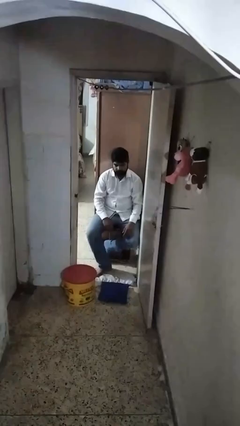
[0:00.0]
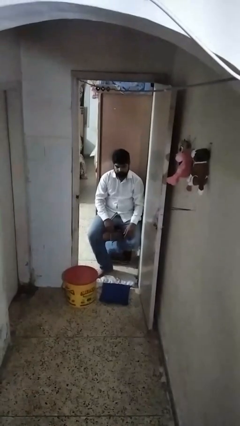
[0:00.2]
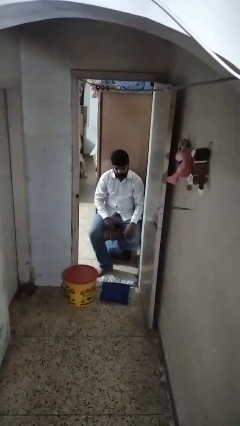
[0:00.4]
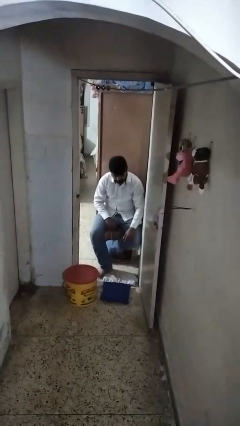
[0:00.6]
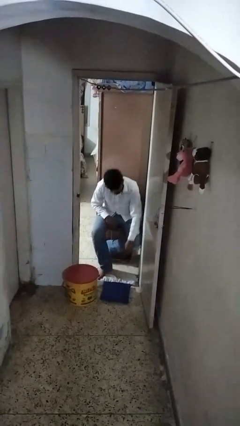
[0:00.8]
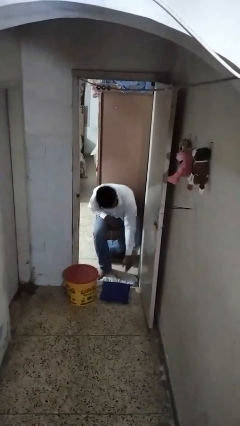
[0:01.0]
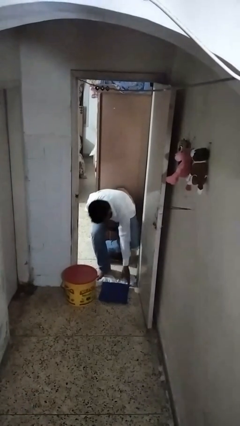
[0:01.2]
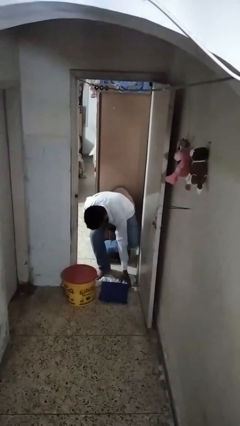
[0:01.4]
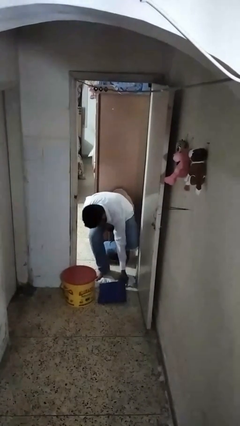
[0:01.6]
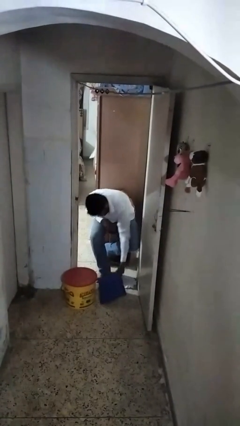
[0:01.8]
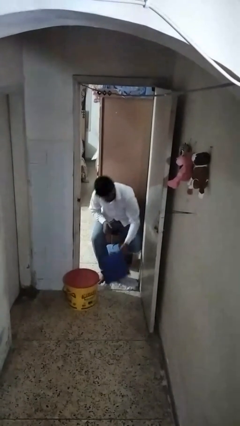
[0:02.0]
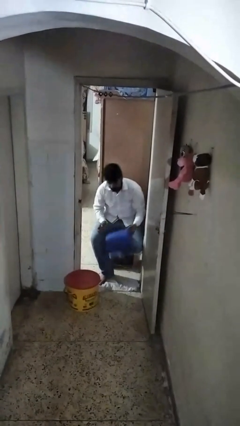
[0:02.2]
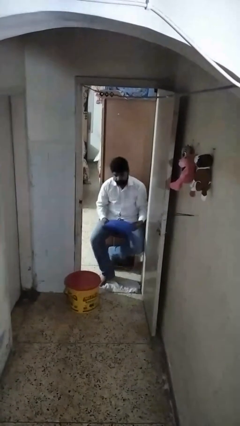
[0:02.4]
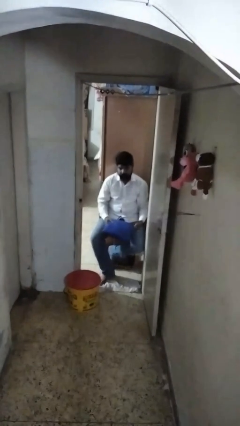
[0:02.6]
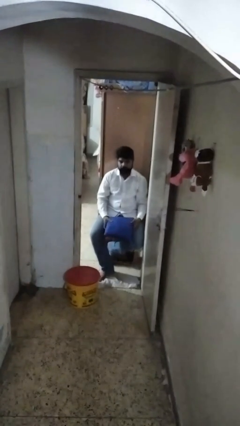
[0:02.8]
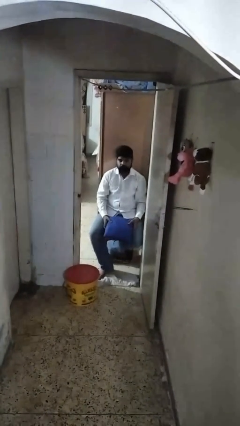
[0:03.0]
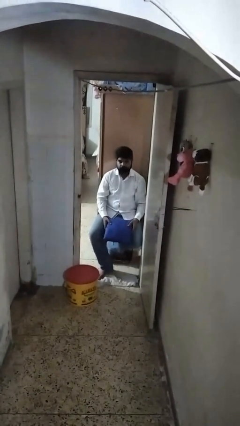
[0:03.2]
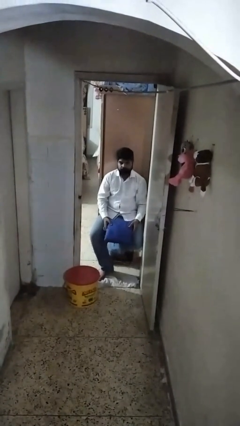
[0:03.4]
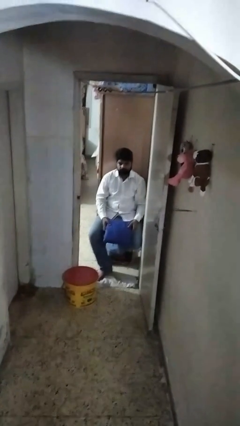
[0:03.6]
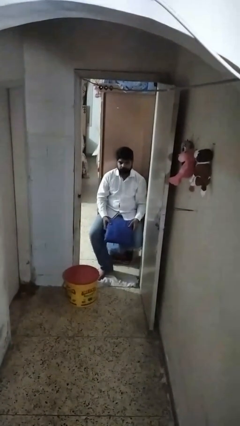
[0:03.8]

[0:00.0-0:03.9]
person picks up object from floor

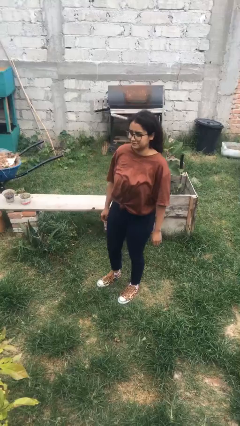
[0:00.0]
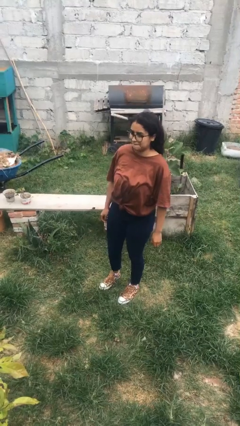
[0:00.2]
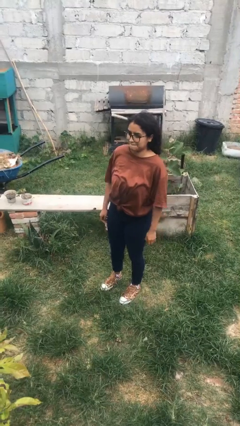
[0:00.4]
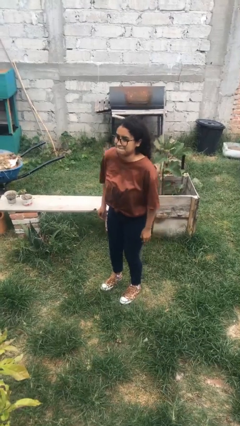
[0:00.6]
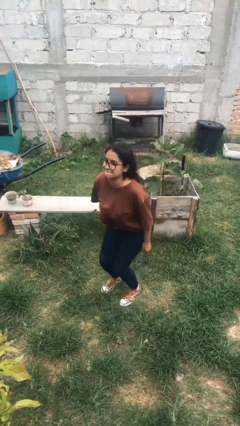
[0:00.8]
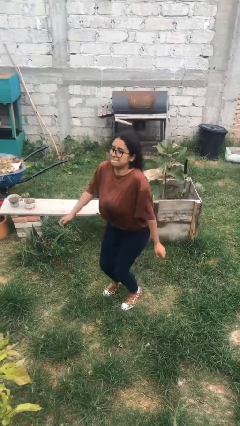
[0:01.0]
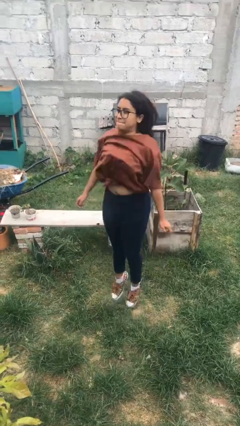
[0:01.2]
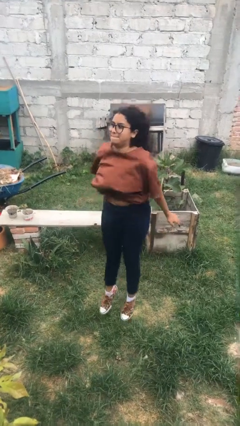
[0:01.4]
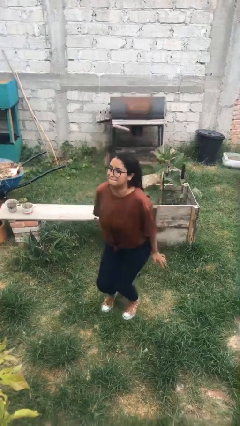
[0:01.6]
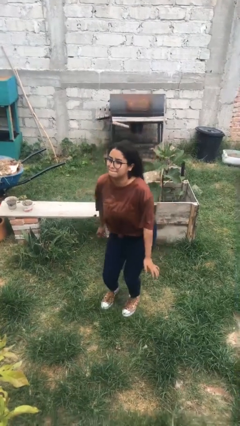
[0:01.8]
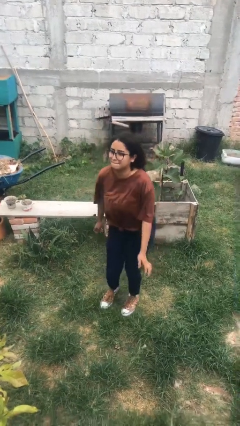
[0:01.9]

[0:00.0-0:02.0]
person jumps

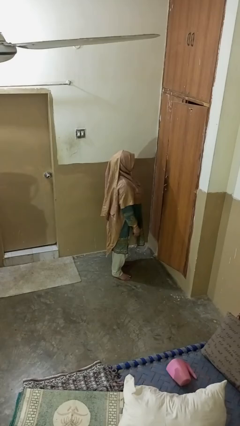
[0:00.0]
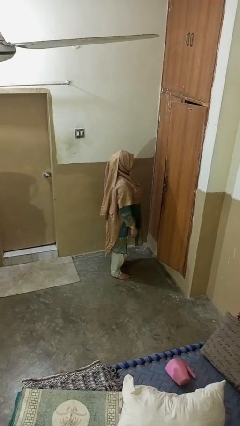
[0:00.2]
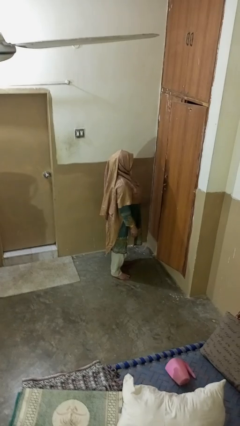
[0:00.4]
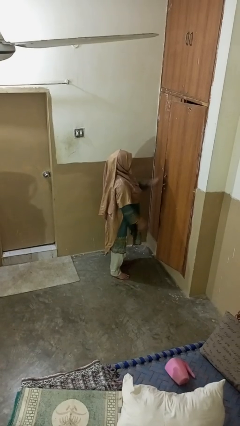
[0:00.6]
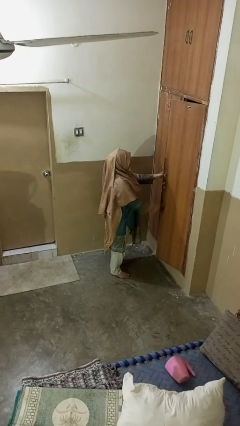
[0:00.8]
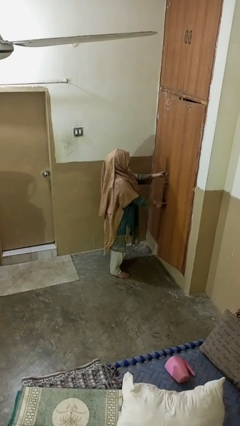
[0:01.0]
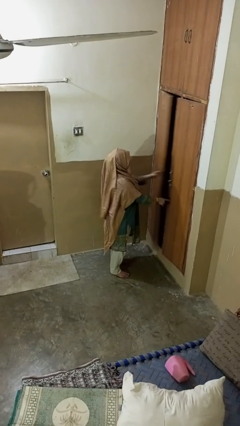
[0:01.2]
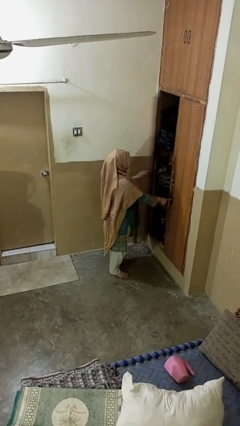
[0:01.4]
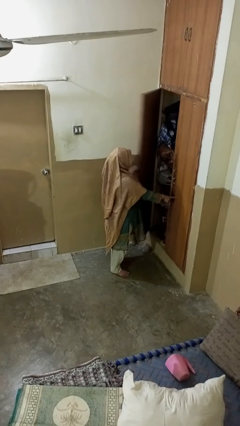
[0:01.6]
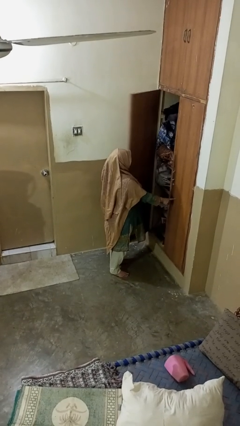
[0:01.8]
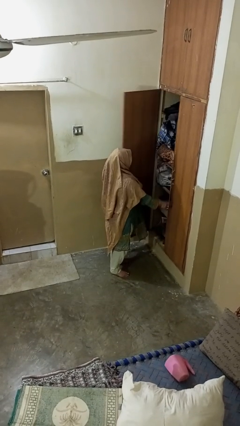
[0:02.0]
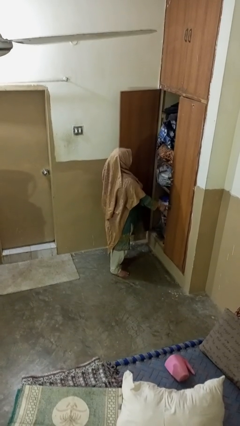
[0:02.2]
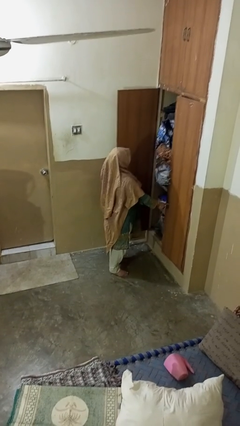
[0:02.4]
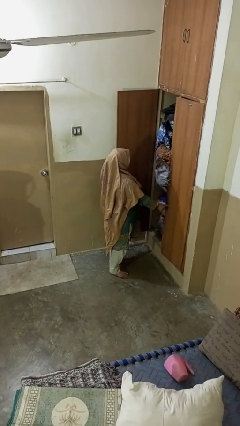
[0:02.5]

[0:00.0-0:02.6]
person opens closet door

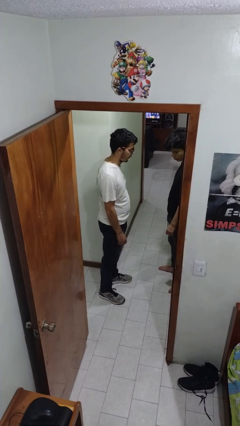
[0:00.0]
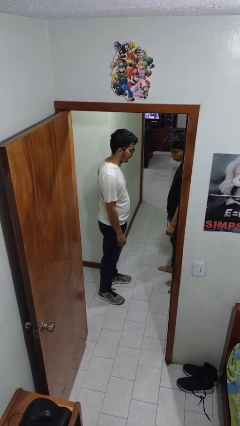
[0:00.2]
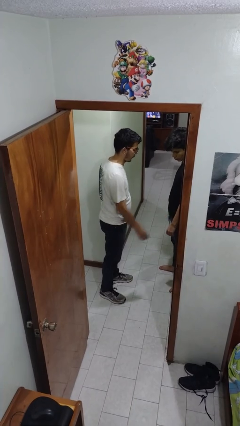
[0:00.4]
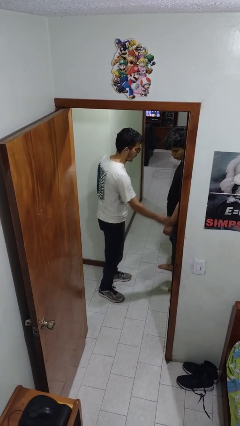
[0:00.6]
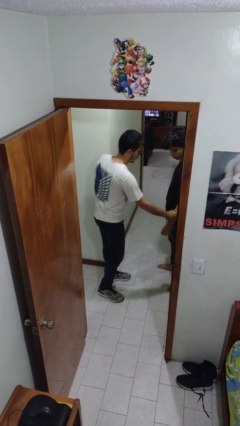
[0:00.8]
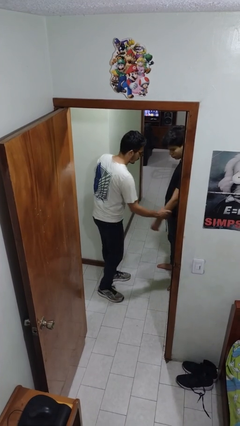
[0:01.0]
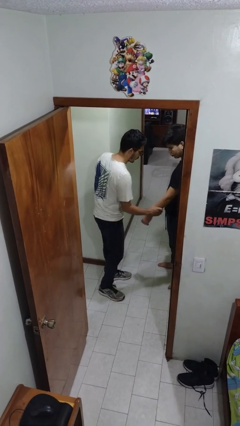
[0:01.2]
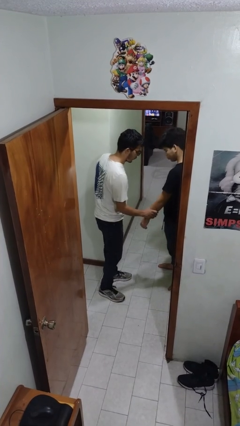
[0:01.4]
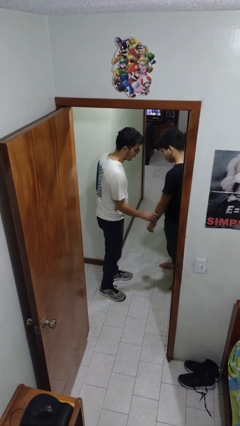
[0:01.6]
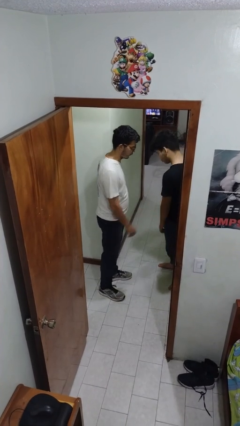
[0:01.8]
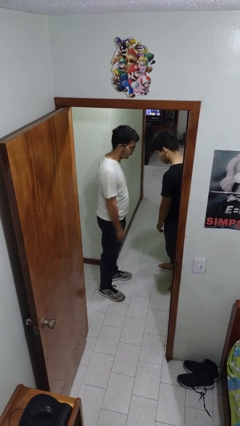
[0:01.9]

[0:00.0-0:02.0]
person grabs person by forearm

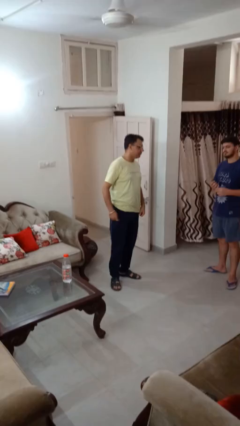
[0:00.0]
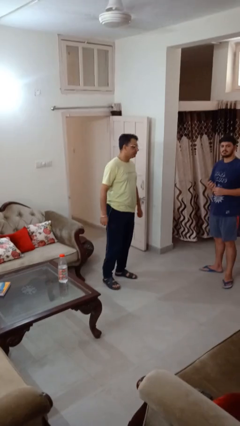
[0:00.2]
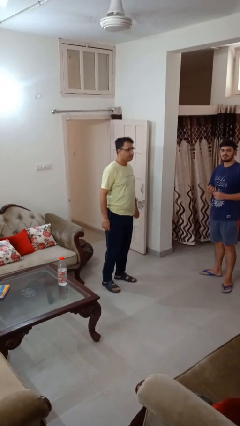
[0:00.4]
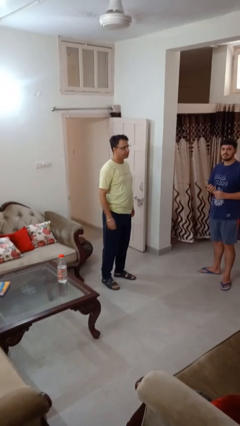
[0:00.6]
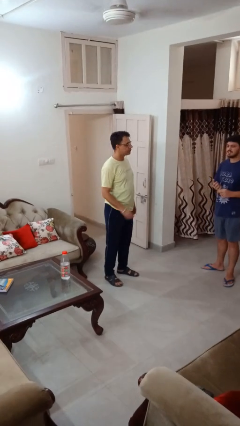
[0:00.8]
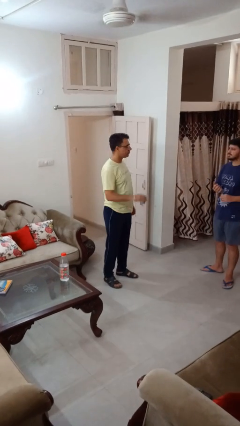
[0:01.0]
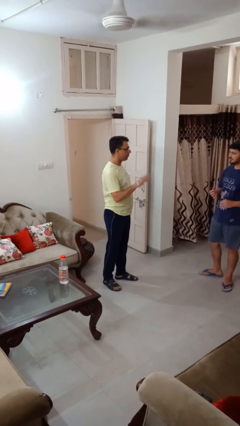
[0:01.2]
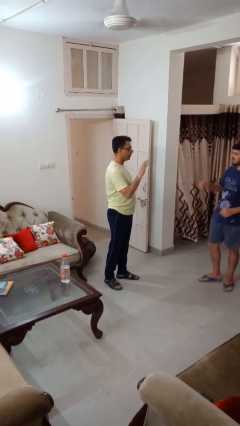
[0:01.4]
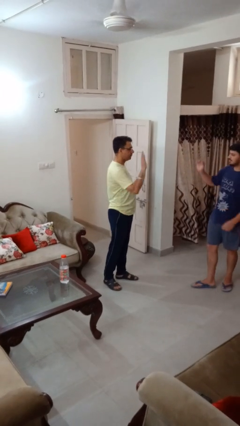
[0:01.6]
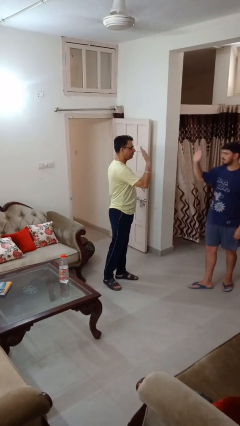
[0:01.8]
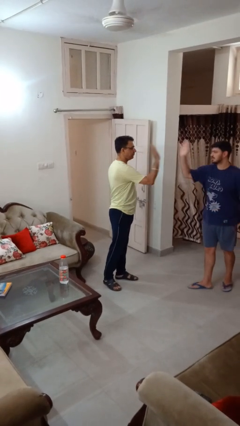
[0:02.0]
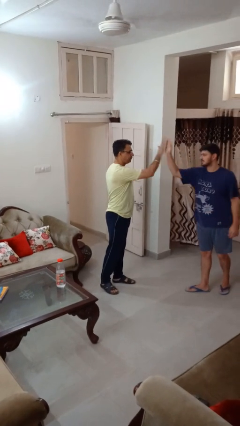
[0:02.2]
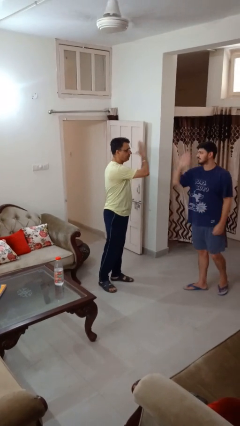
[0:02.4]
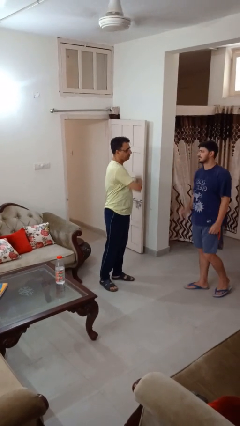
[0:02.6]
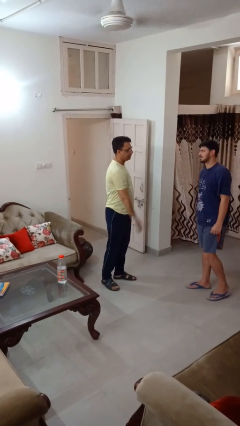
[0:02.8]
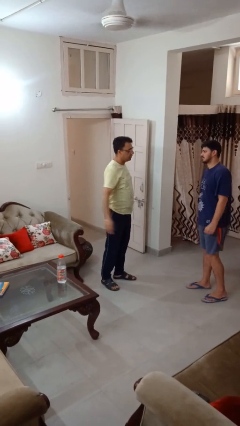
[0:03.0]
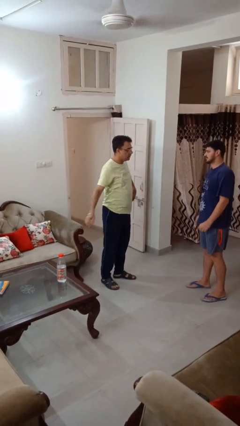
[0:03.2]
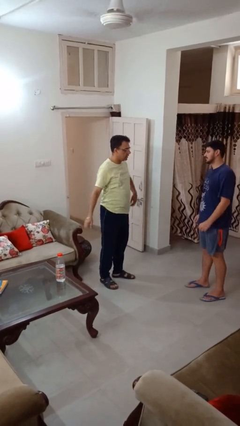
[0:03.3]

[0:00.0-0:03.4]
person highfives hand

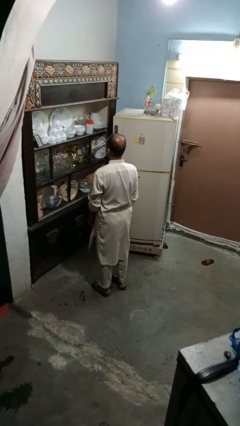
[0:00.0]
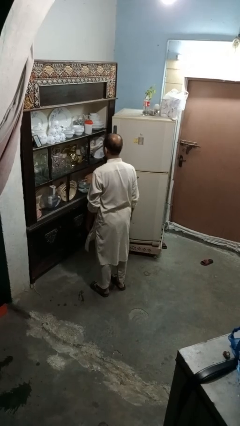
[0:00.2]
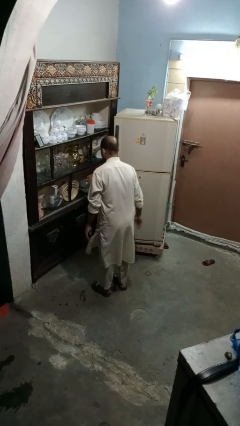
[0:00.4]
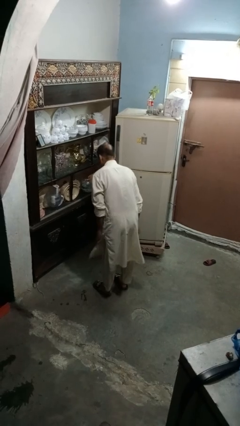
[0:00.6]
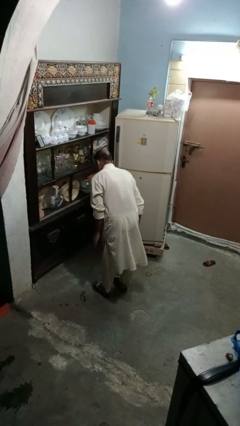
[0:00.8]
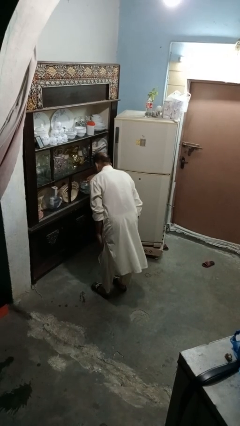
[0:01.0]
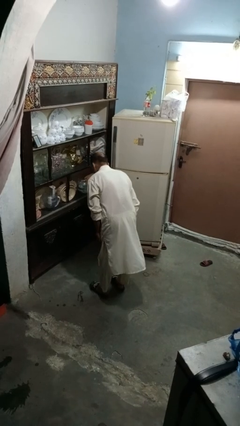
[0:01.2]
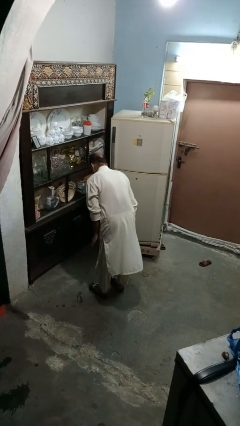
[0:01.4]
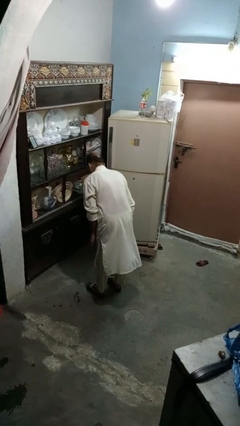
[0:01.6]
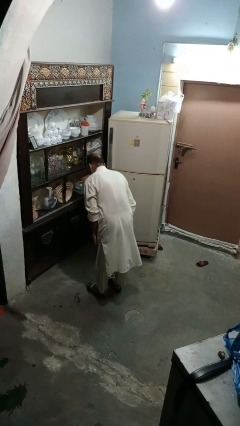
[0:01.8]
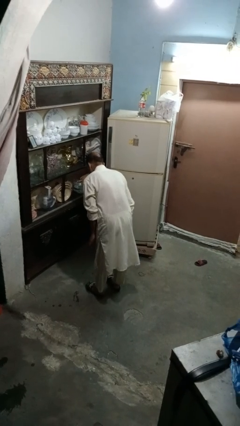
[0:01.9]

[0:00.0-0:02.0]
person slaps hands on thighs

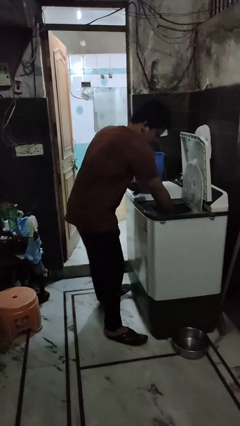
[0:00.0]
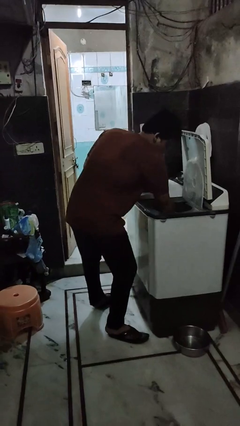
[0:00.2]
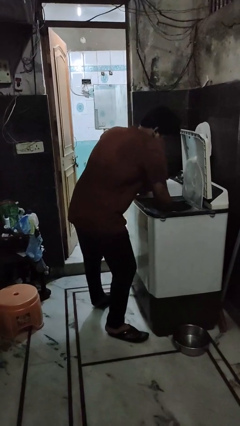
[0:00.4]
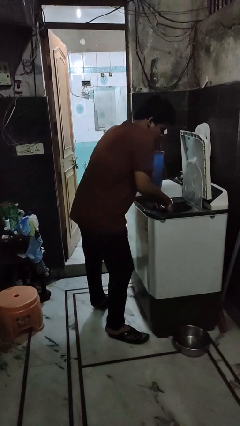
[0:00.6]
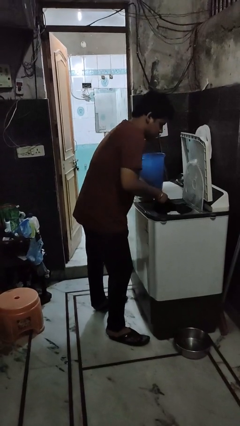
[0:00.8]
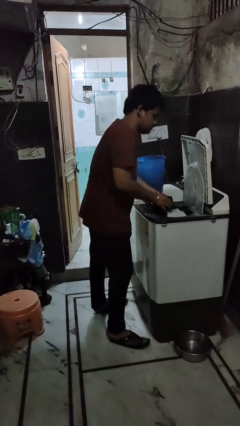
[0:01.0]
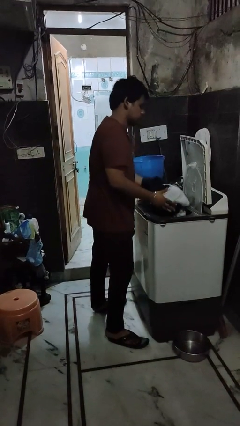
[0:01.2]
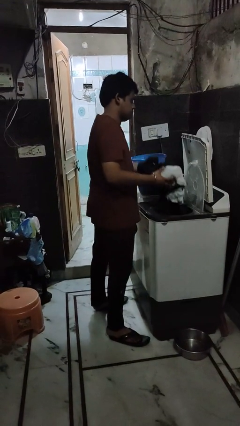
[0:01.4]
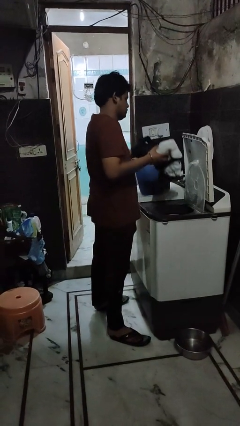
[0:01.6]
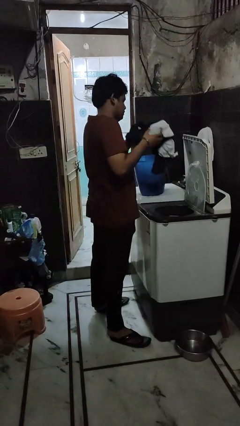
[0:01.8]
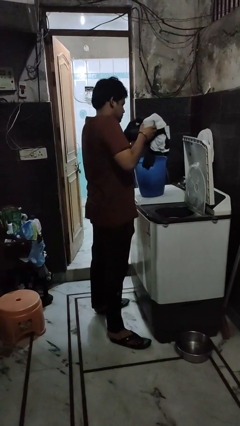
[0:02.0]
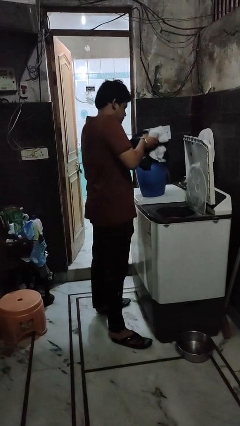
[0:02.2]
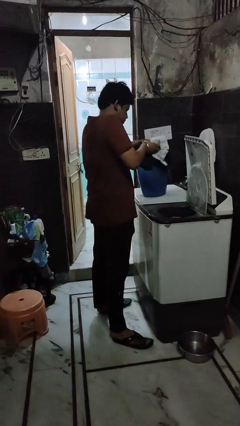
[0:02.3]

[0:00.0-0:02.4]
person unloads dryer
